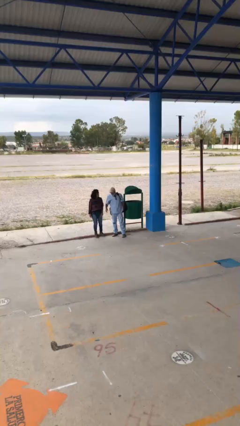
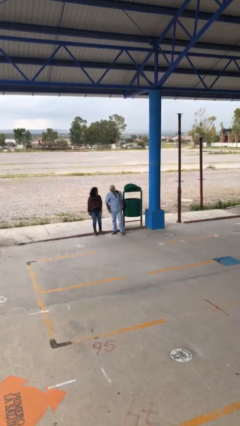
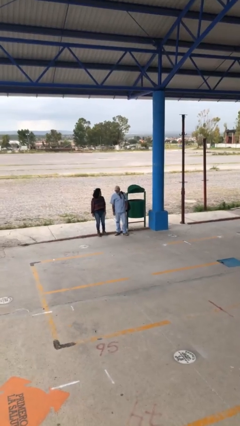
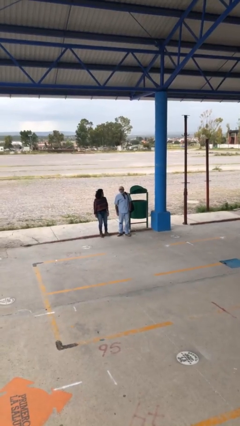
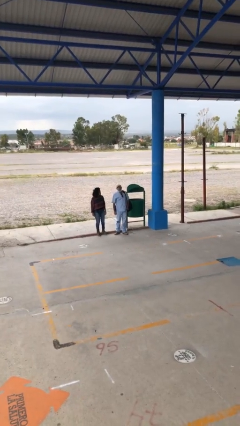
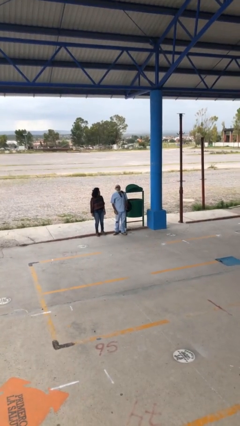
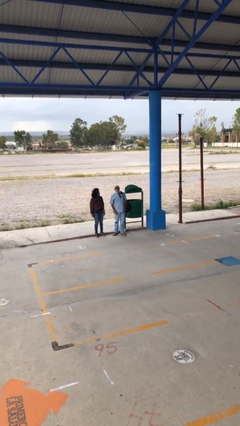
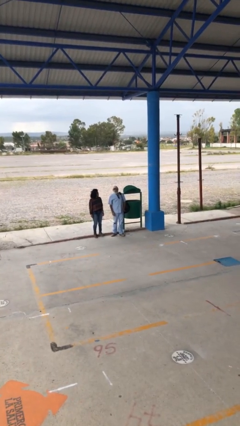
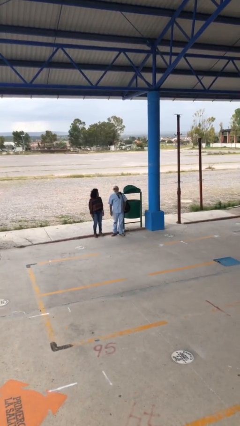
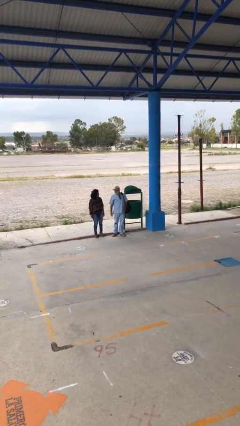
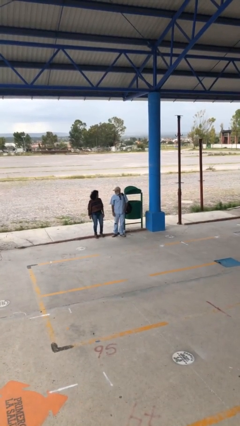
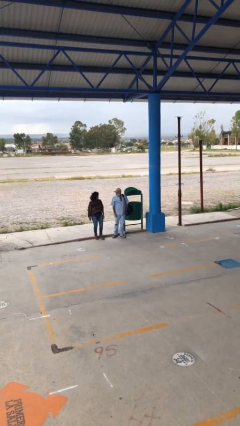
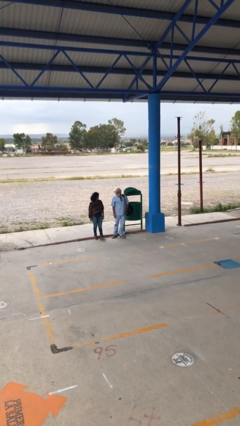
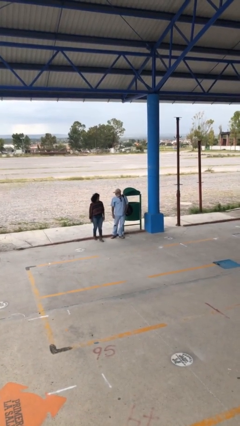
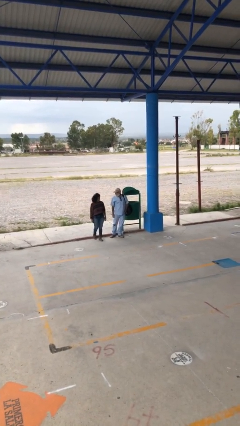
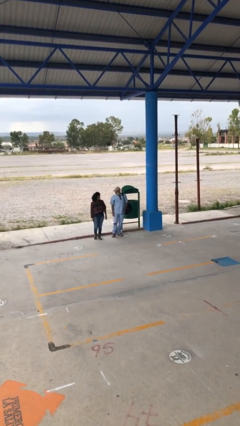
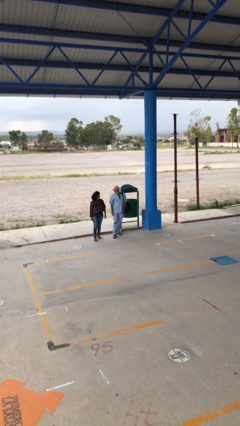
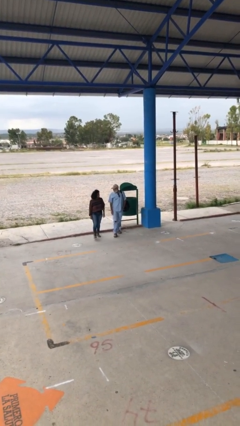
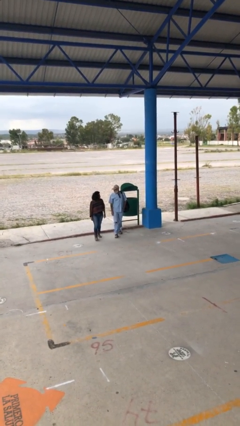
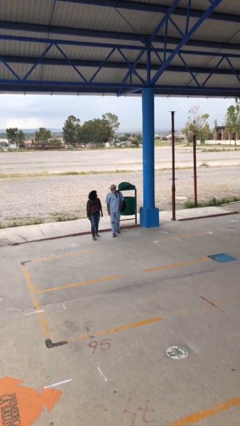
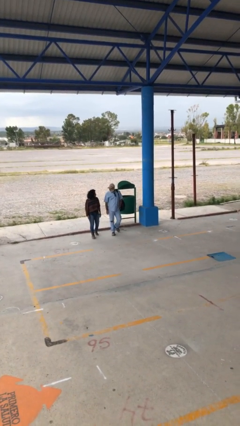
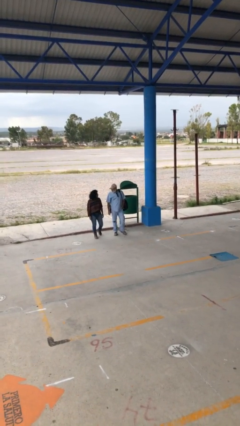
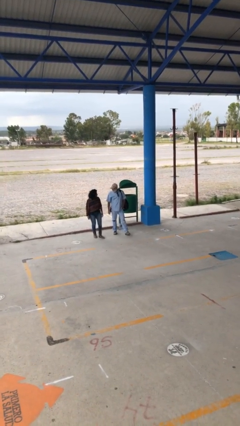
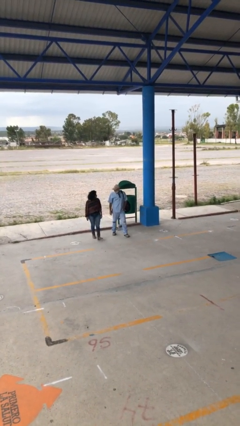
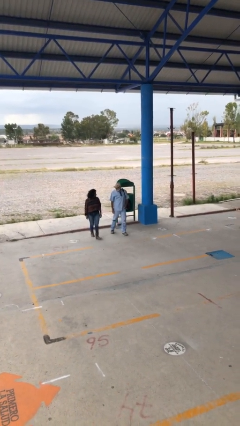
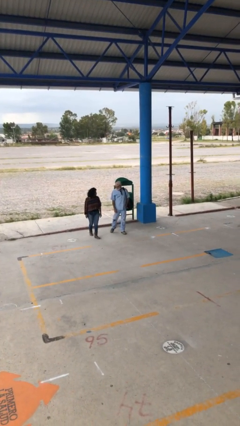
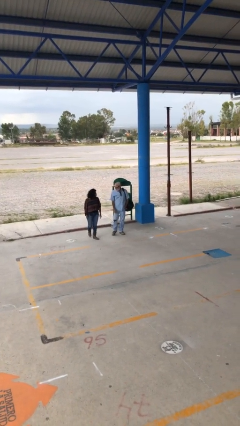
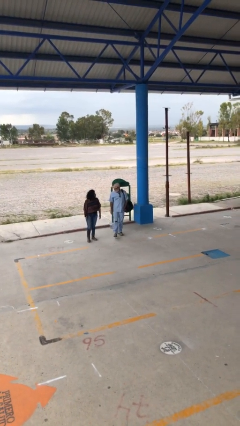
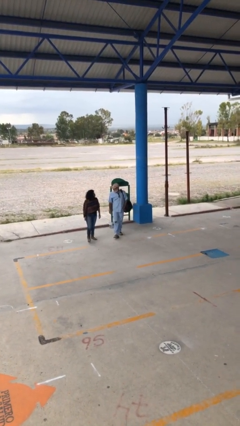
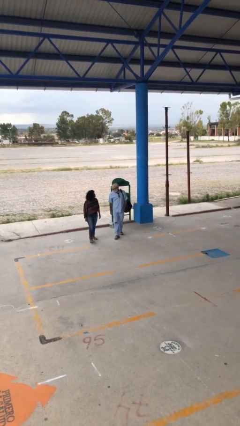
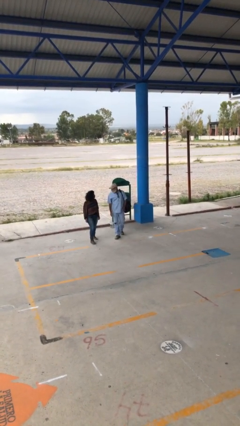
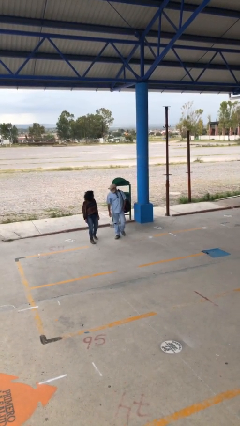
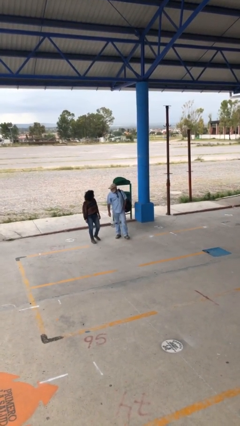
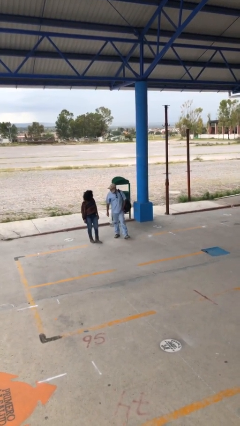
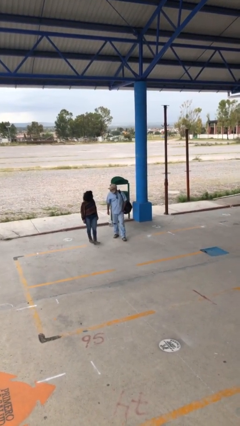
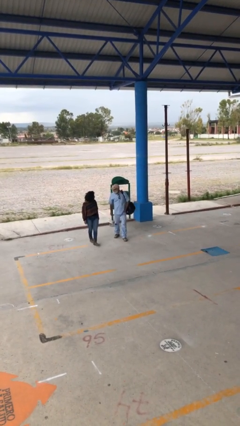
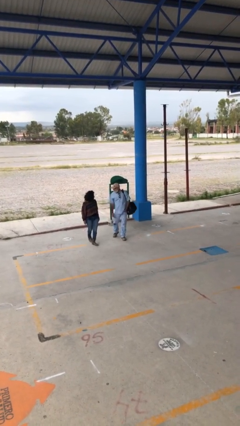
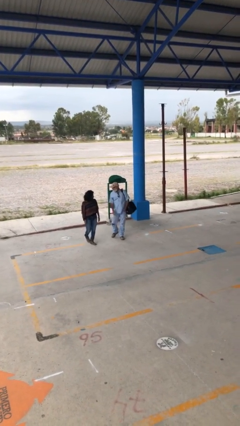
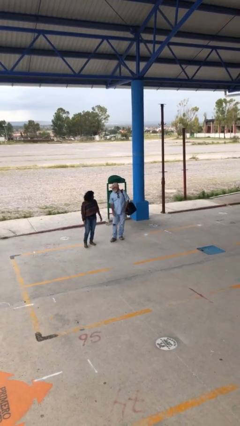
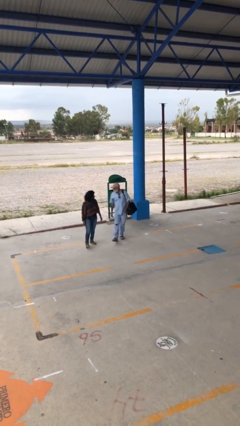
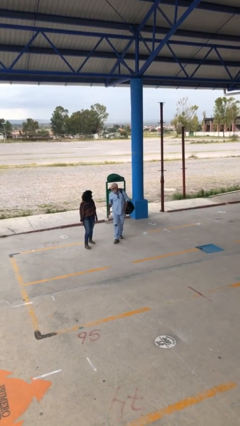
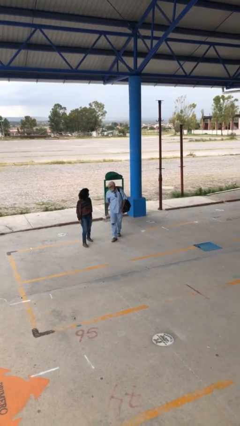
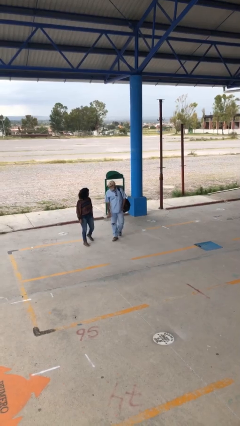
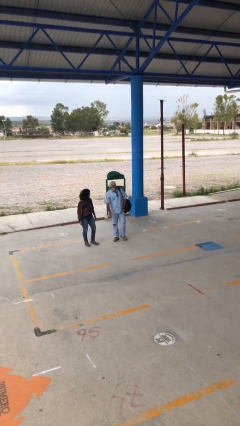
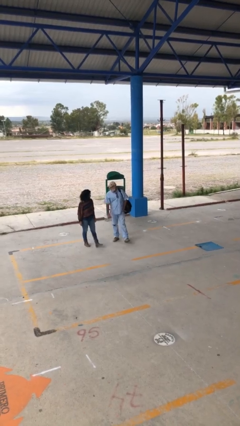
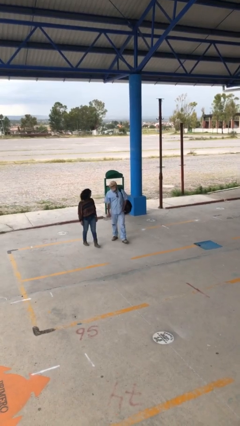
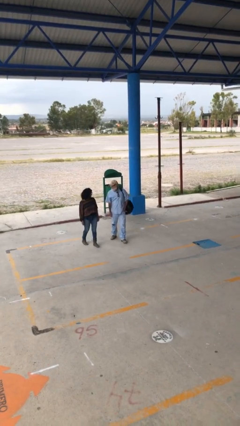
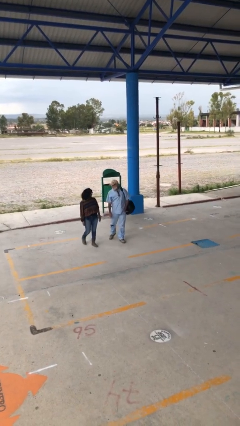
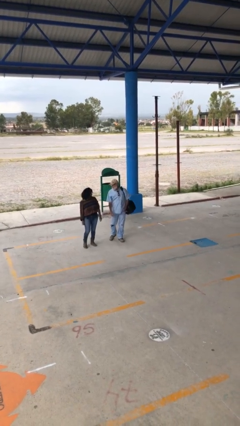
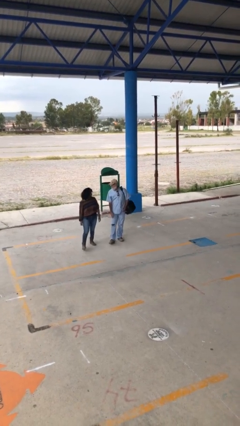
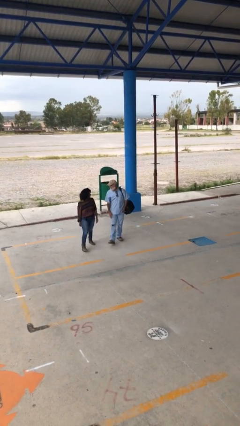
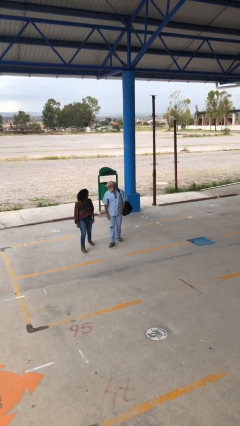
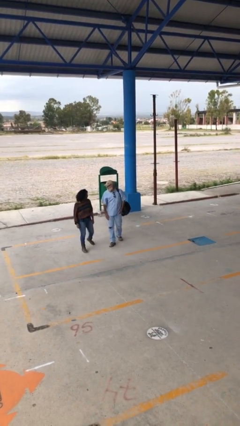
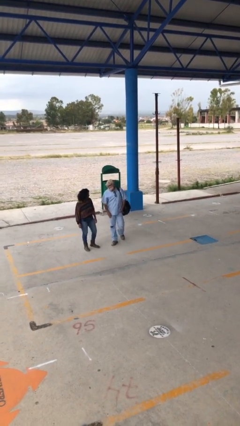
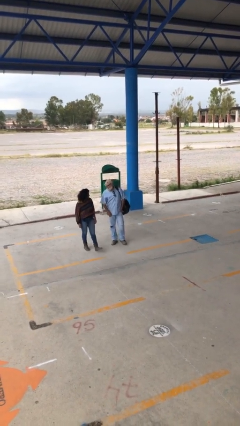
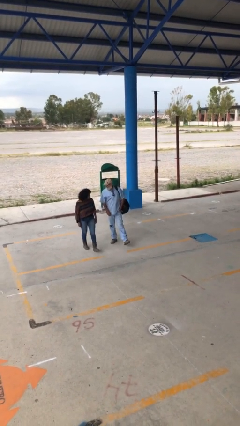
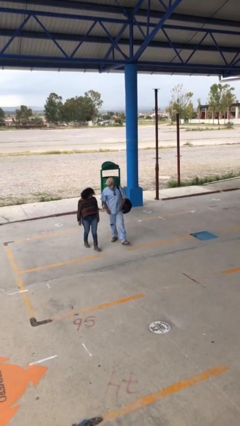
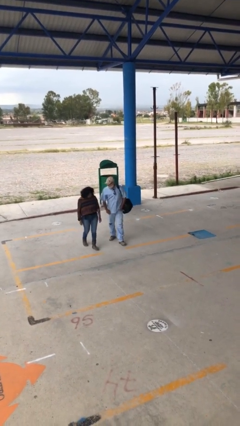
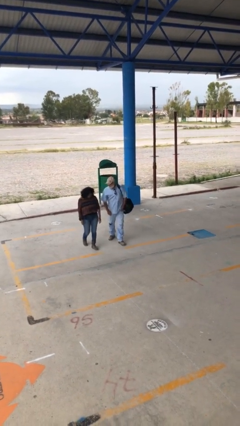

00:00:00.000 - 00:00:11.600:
person talks to person

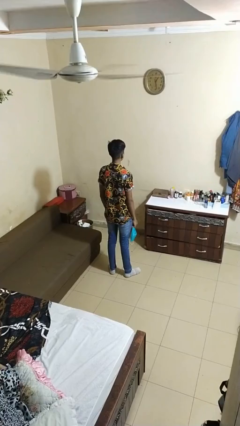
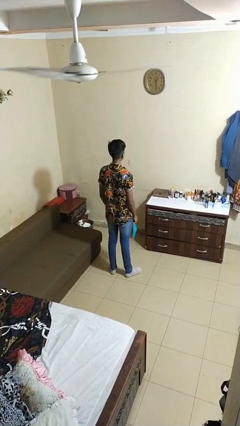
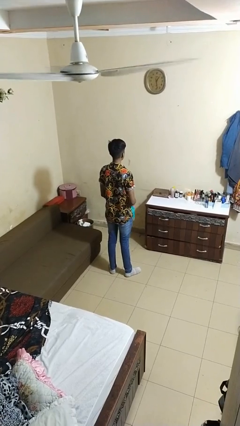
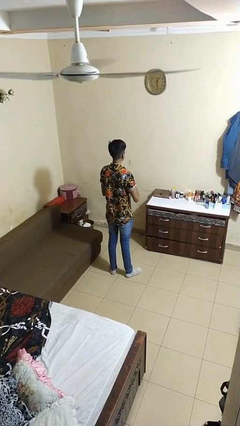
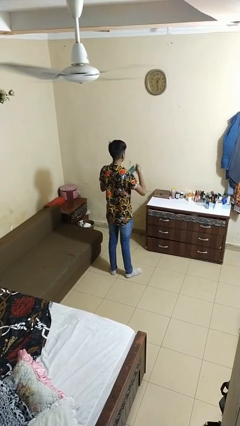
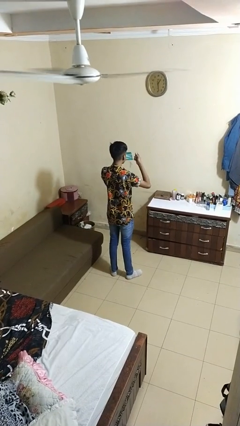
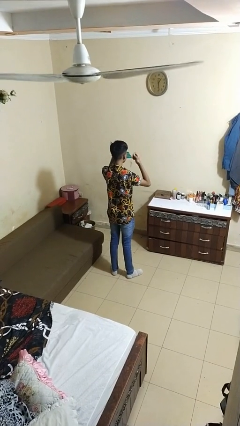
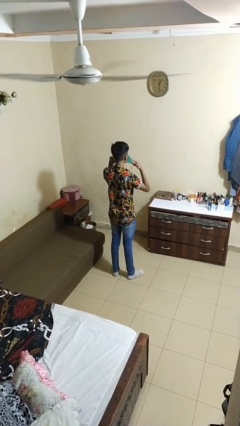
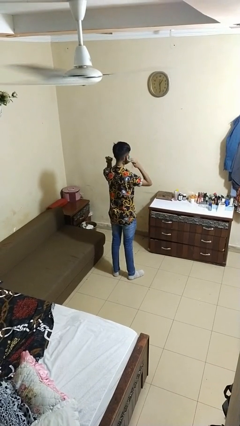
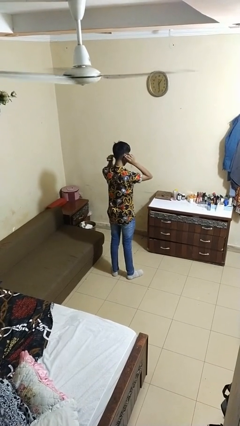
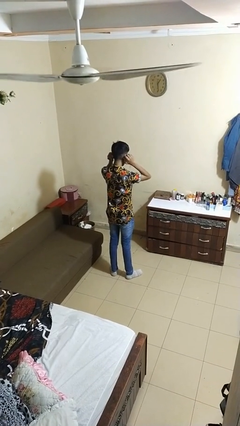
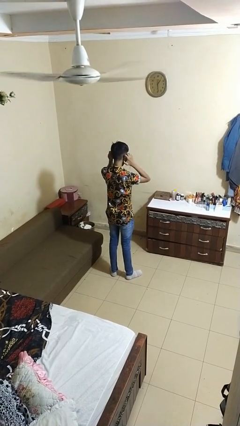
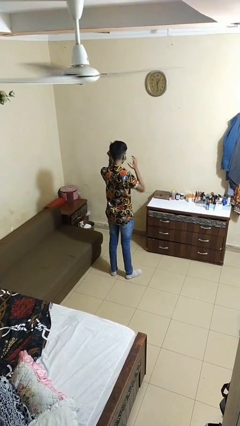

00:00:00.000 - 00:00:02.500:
person puts on facemask

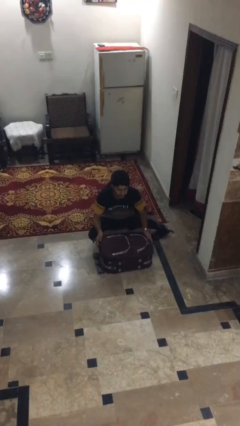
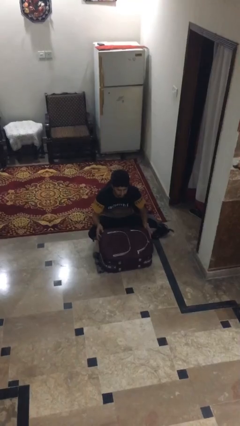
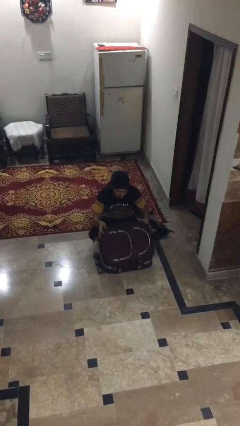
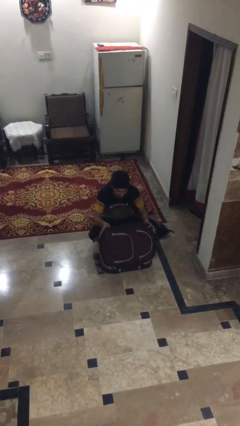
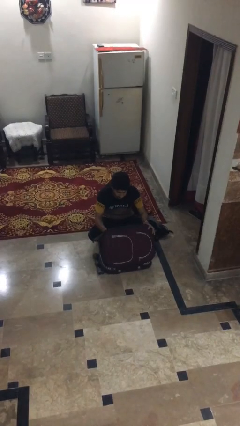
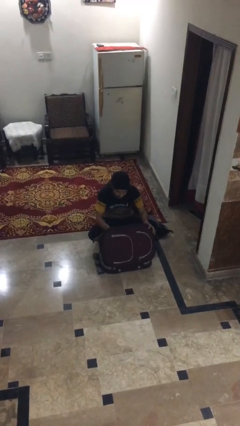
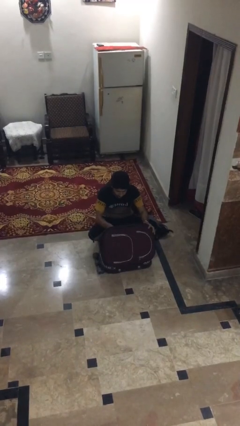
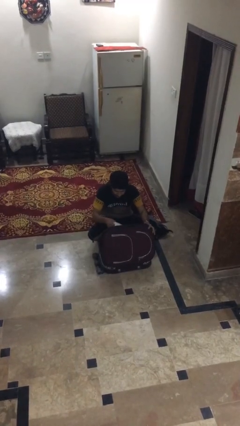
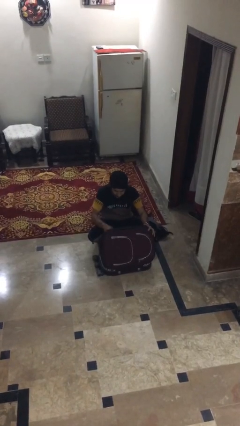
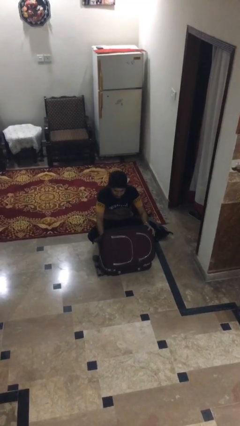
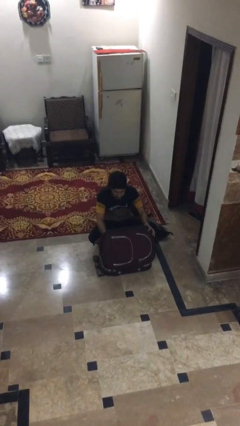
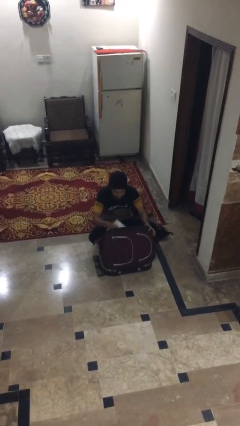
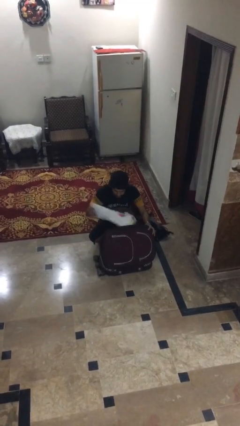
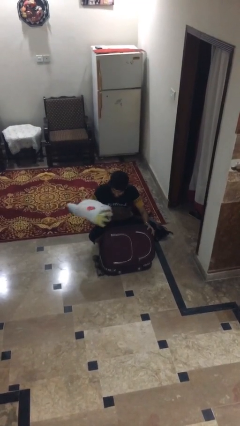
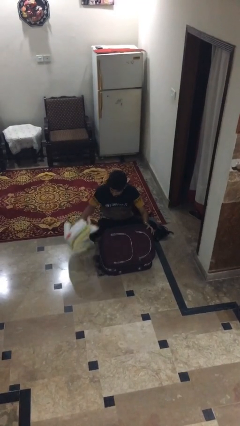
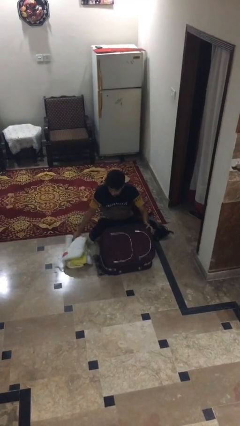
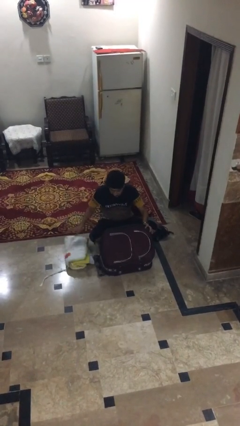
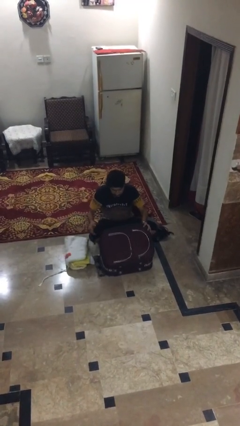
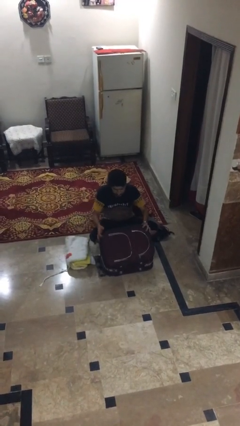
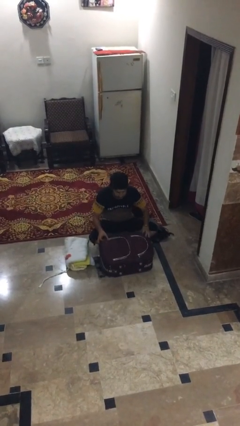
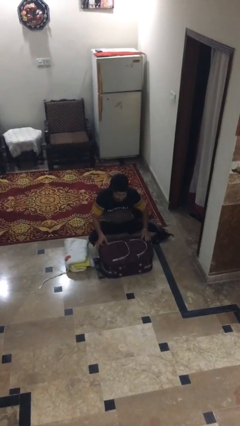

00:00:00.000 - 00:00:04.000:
person unloads clothes from suitcase
